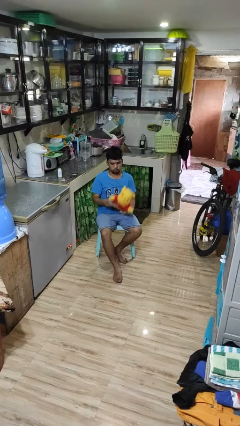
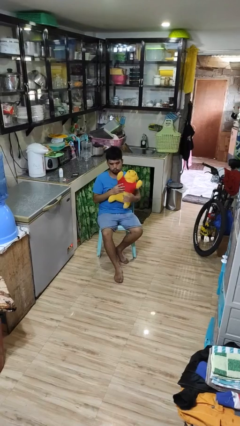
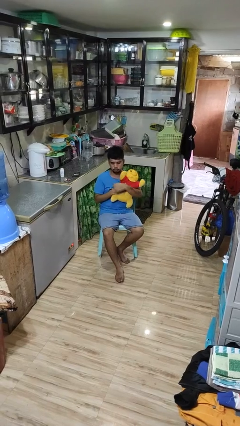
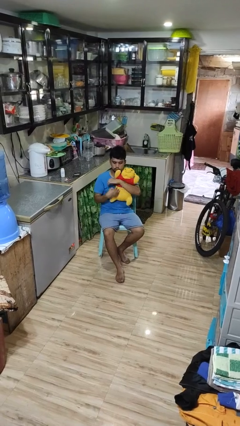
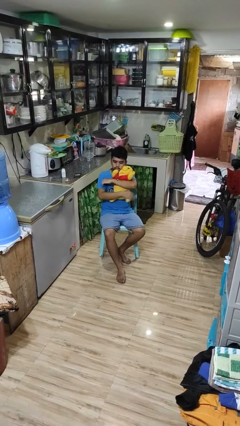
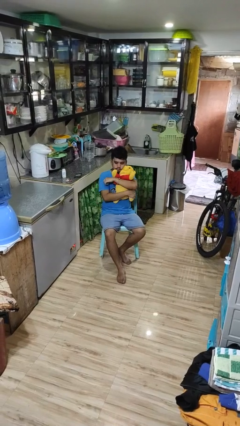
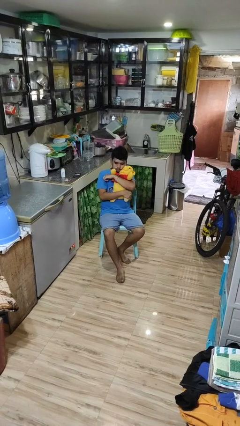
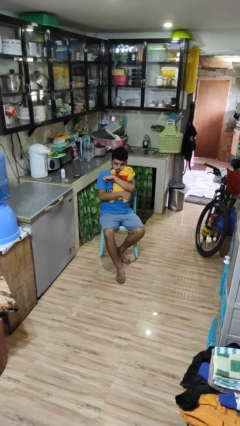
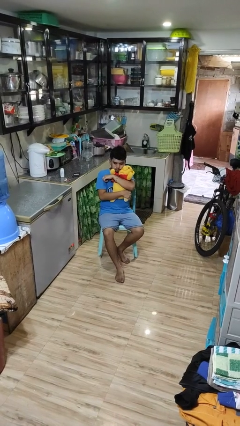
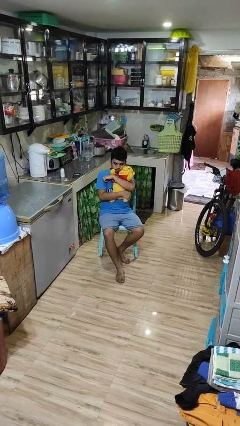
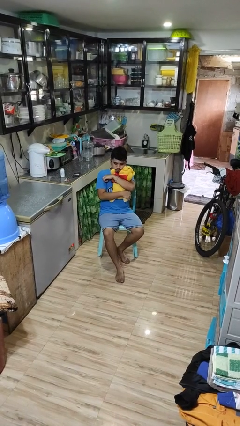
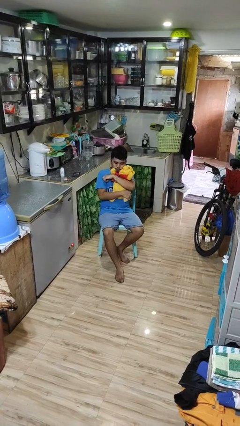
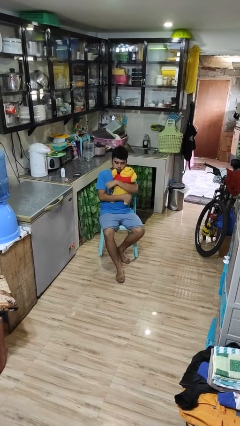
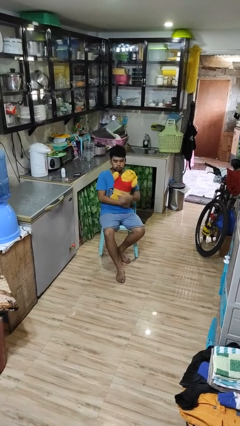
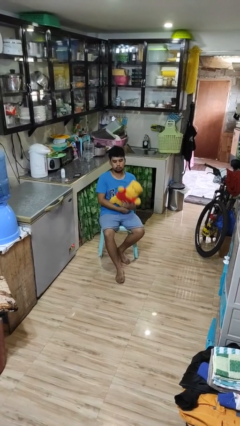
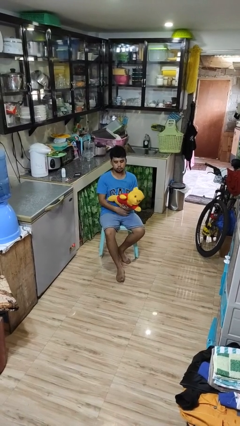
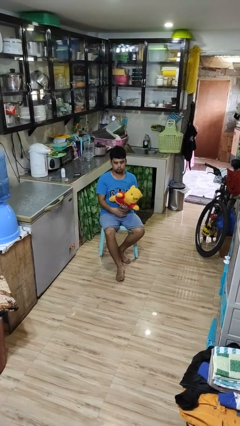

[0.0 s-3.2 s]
person hugs stuffed animal

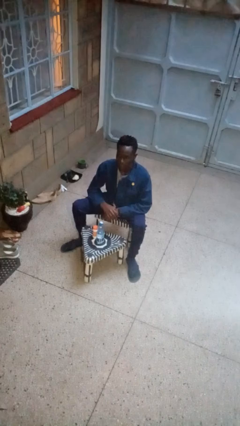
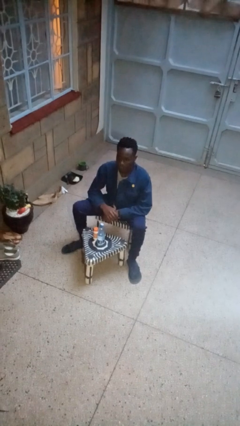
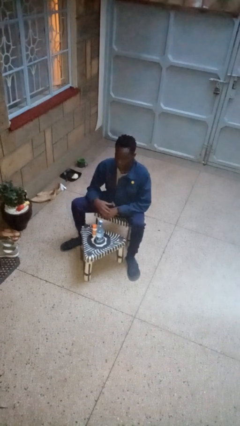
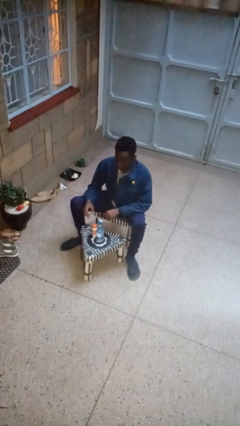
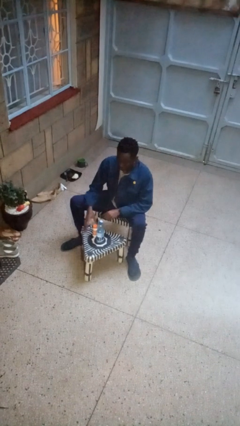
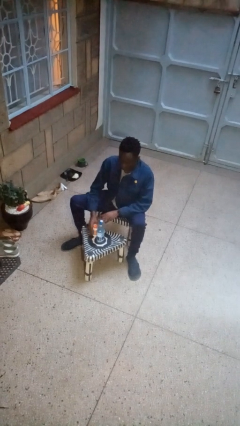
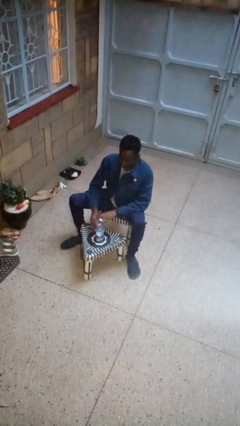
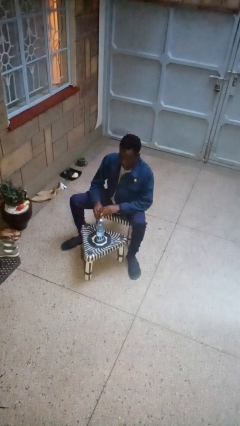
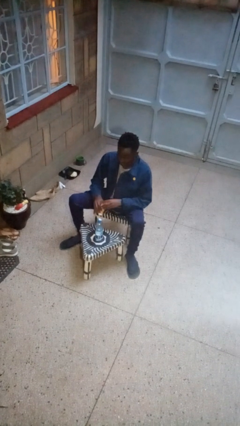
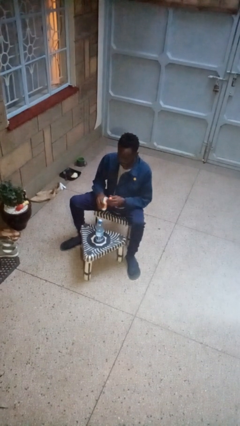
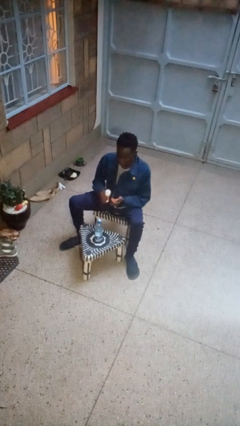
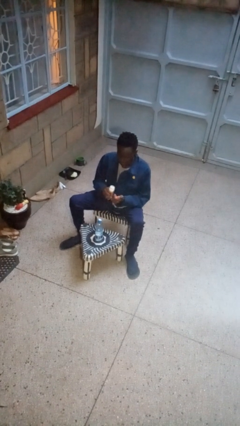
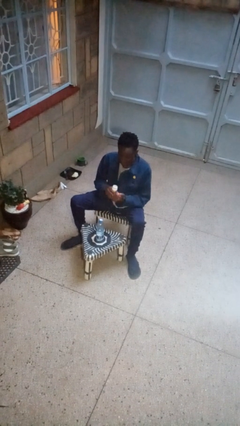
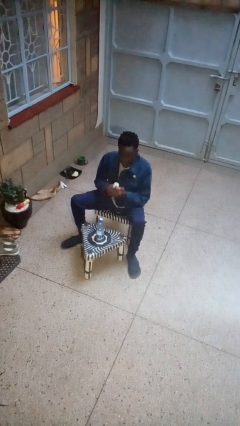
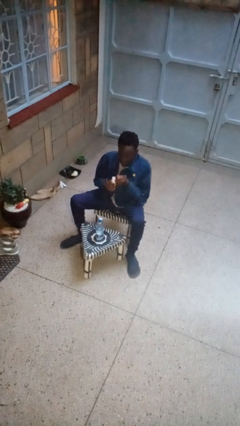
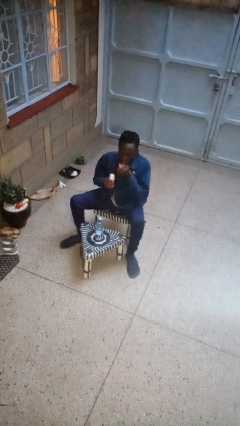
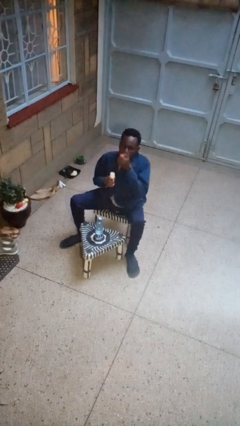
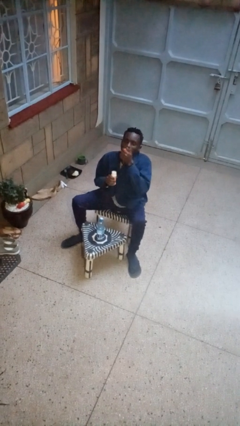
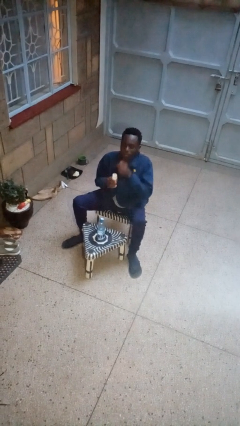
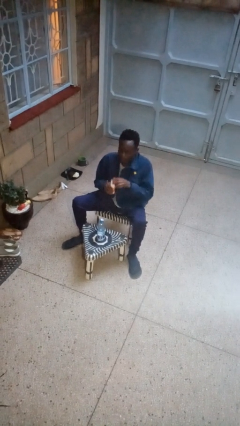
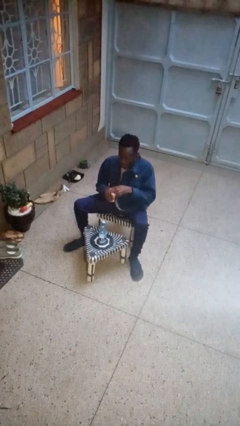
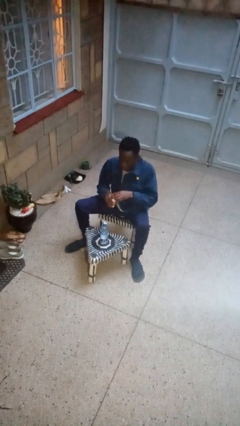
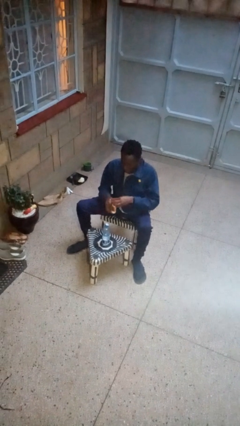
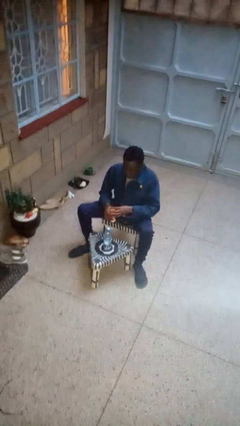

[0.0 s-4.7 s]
person takes medicine pills

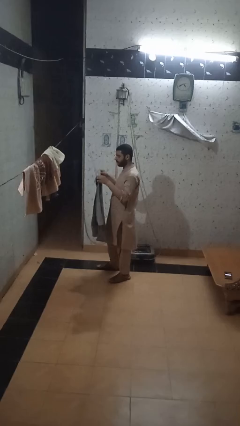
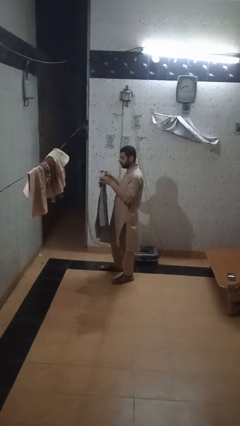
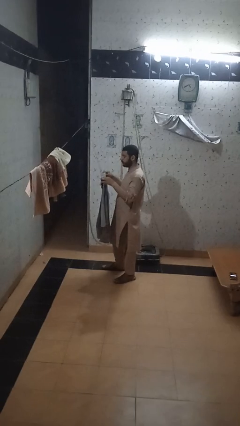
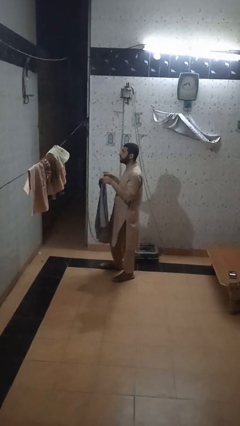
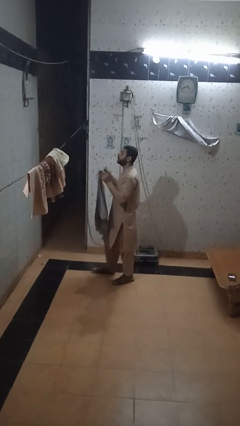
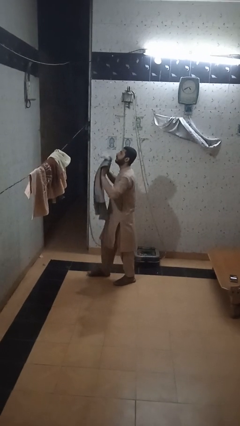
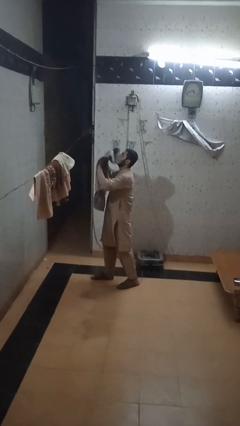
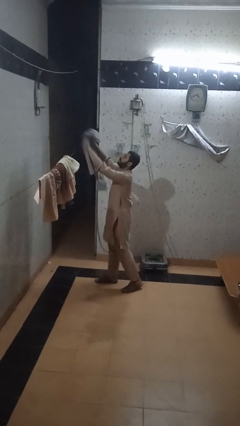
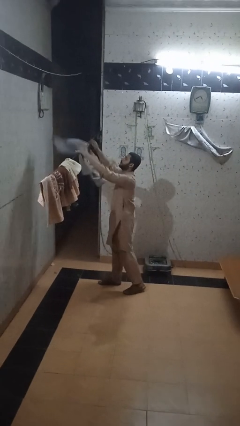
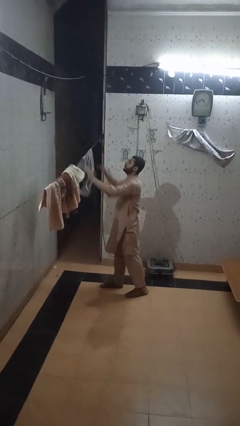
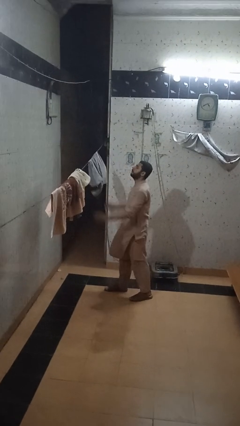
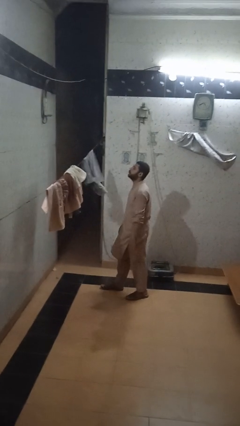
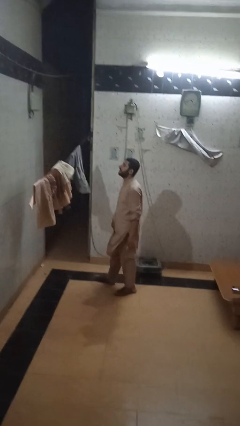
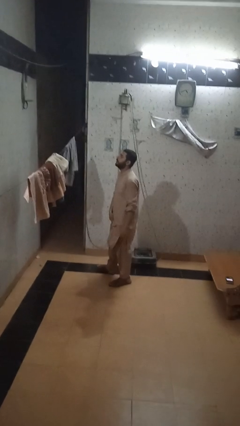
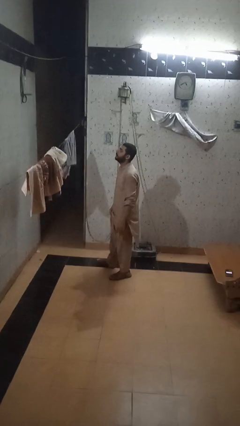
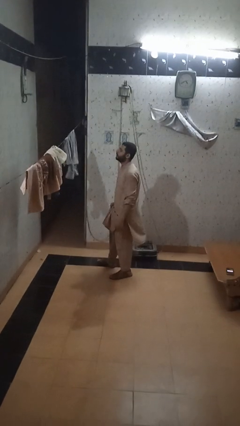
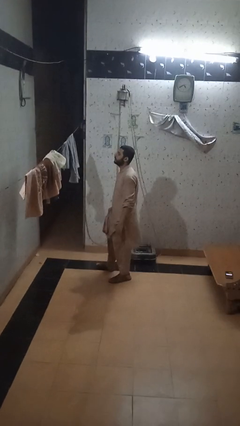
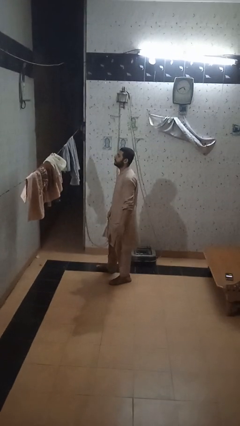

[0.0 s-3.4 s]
person puts clothes into closet

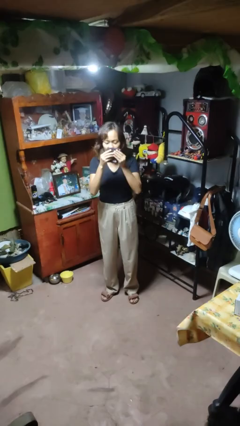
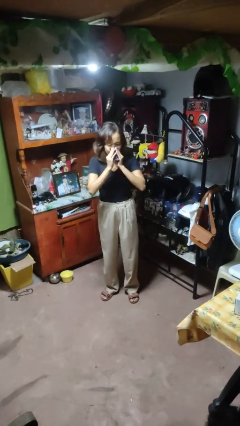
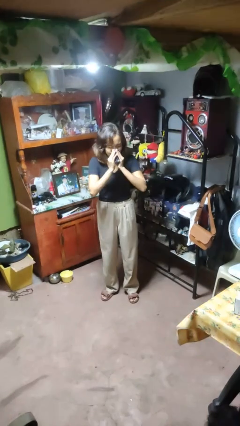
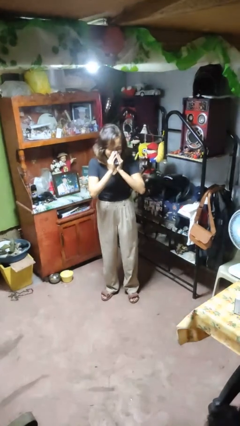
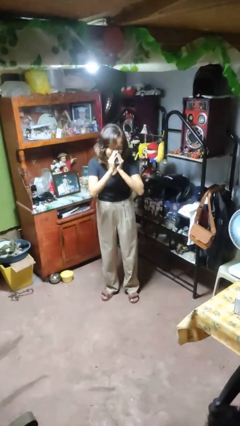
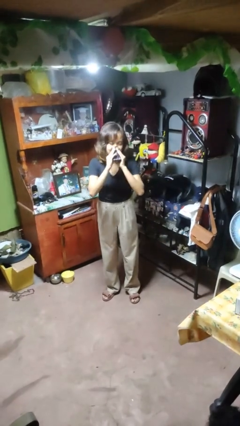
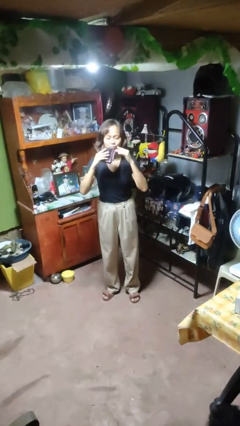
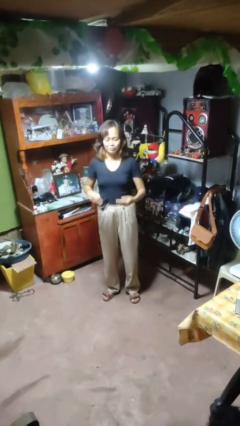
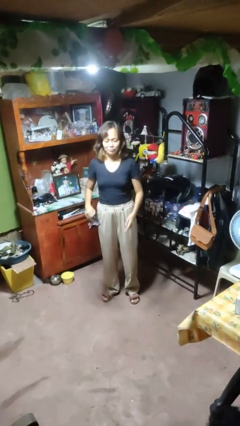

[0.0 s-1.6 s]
person blows nose

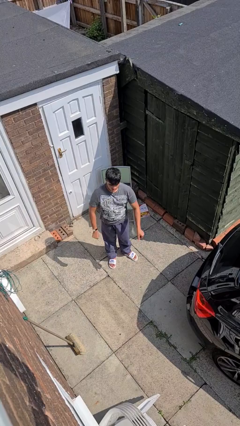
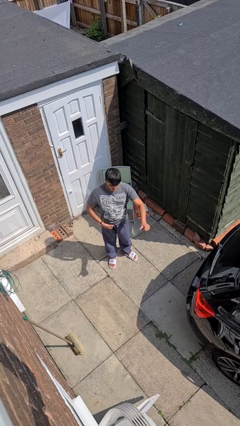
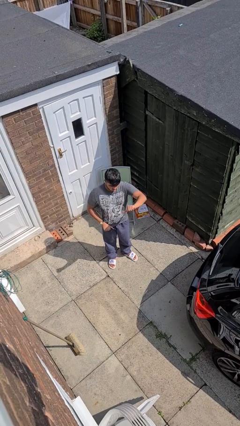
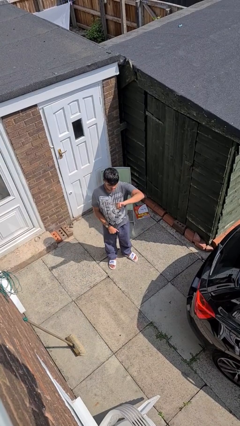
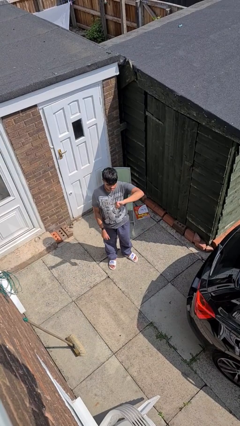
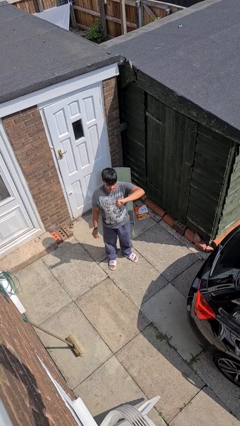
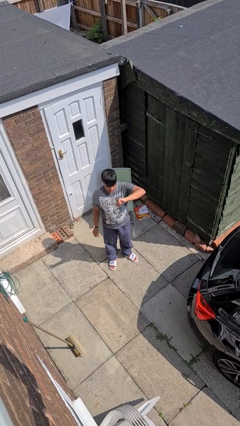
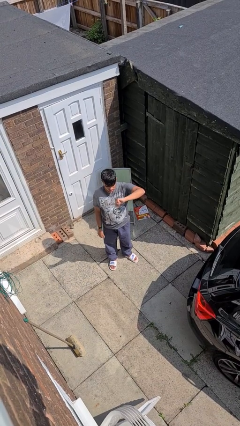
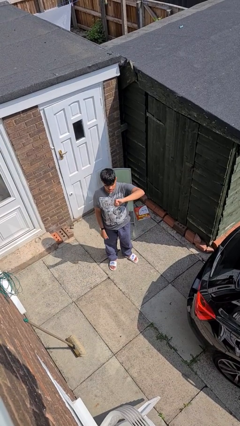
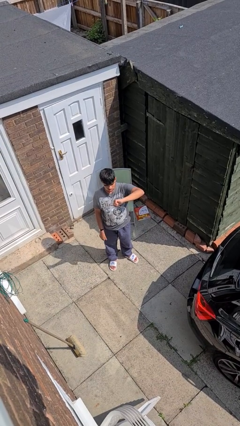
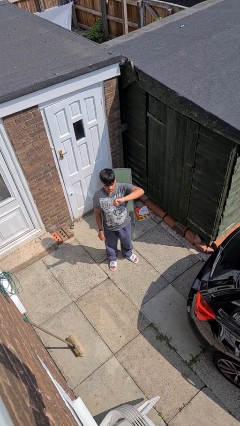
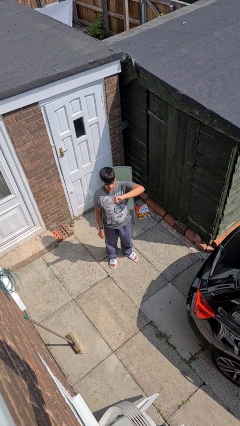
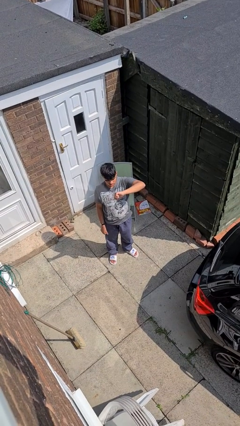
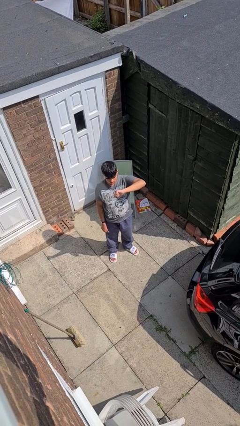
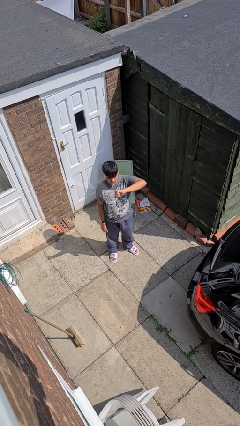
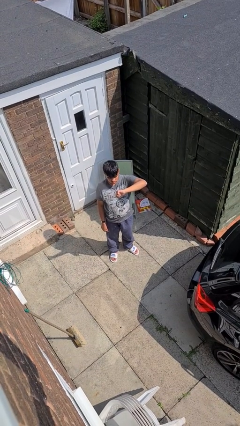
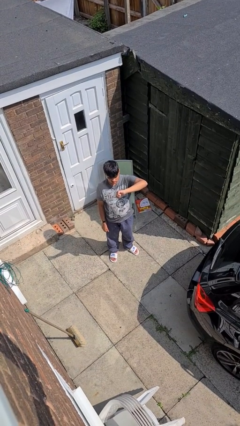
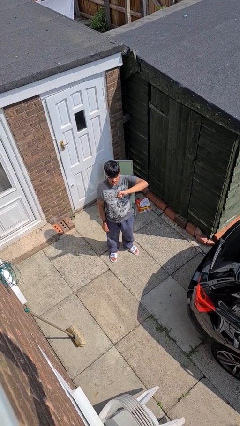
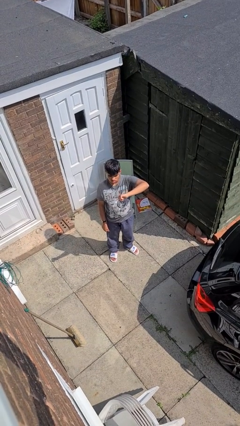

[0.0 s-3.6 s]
person gestures thumbs down

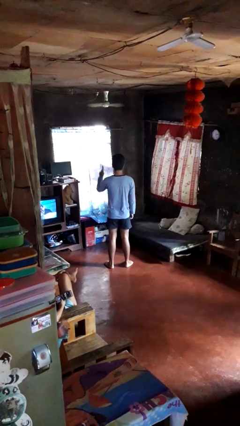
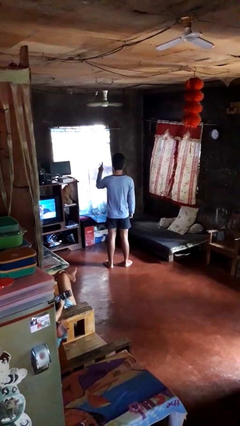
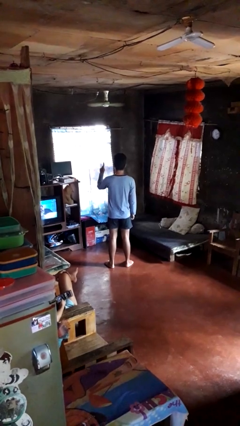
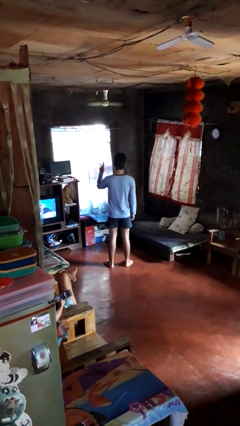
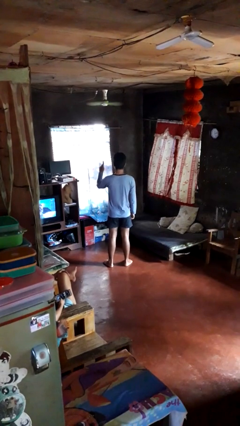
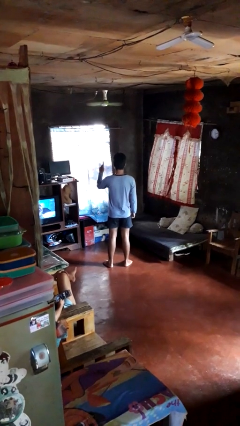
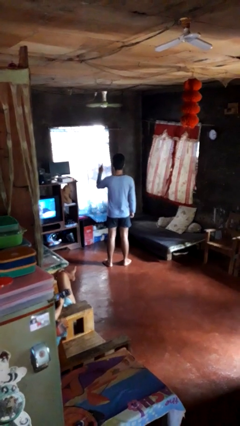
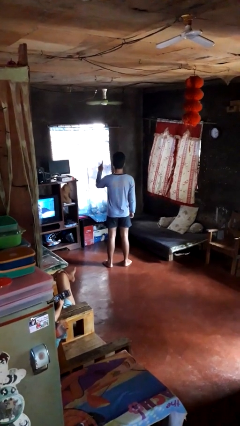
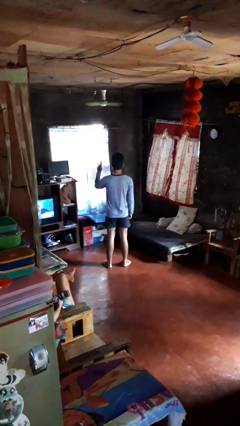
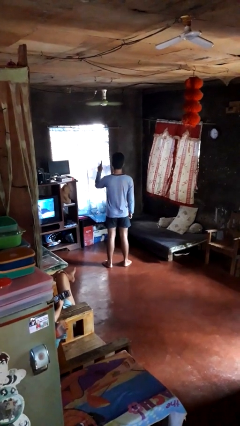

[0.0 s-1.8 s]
person gestures number one
